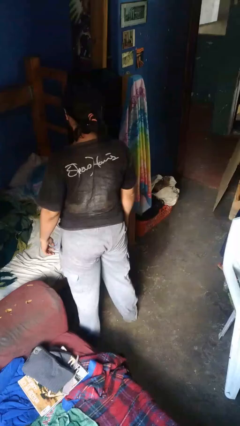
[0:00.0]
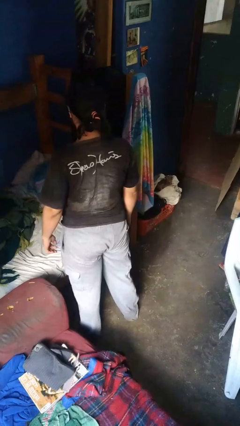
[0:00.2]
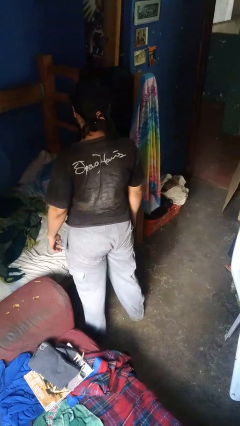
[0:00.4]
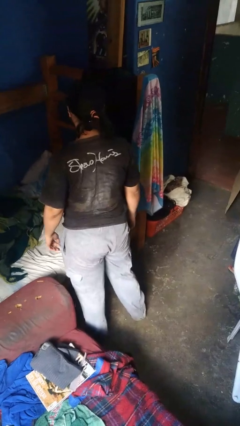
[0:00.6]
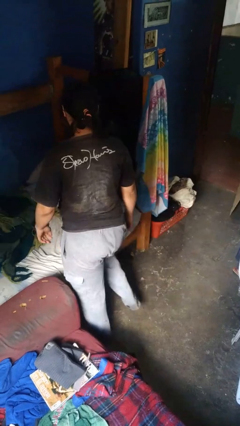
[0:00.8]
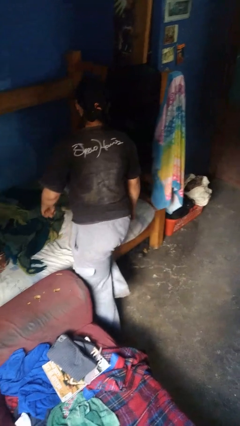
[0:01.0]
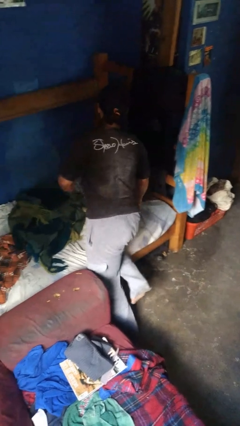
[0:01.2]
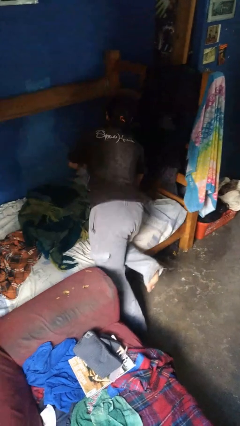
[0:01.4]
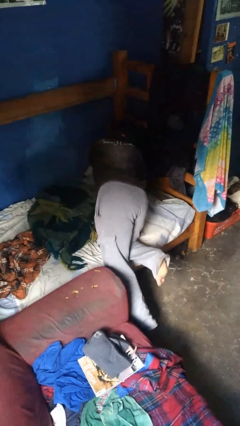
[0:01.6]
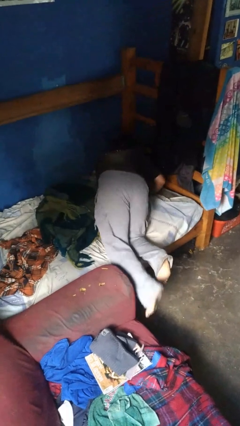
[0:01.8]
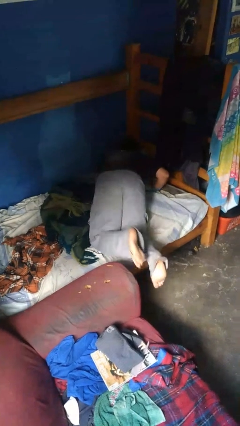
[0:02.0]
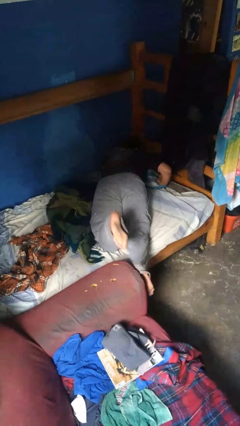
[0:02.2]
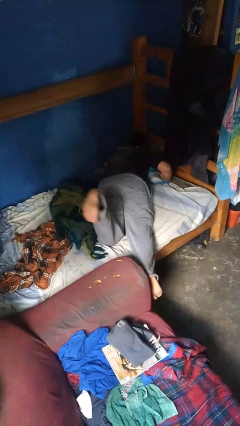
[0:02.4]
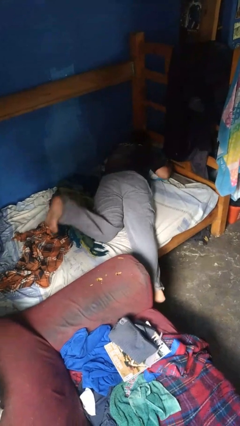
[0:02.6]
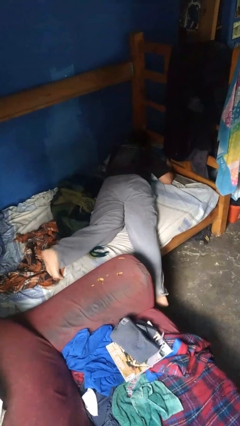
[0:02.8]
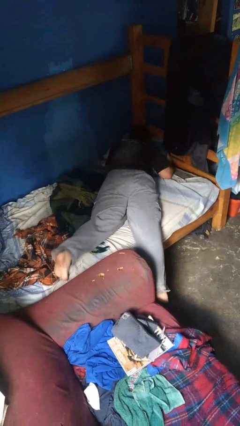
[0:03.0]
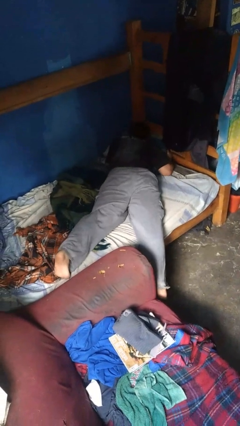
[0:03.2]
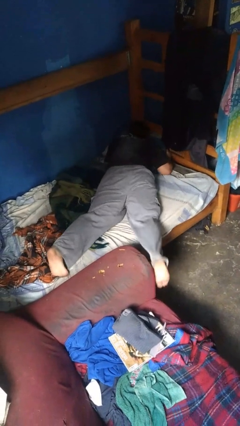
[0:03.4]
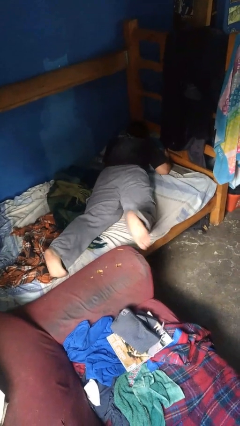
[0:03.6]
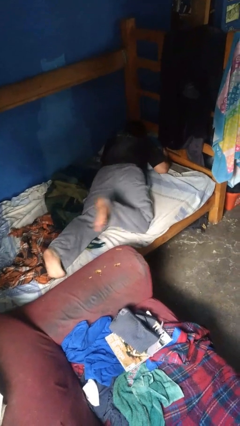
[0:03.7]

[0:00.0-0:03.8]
person lies down on bed

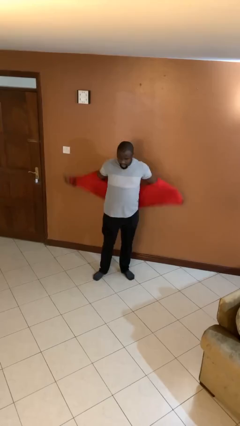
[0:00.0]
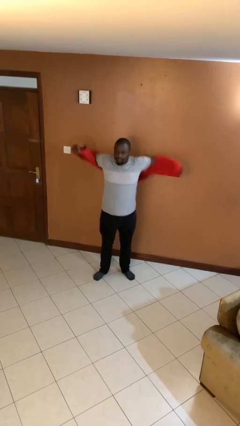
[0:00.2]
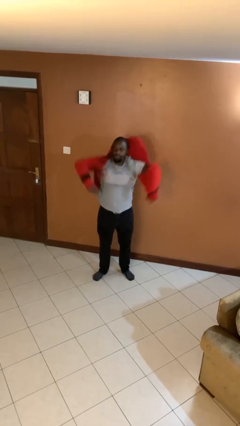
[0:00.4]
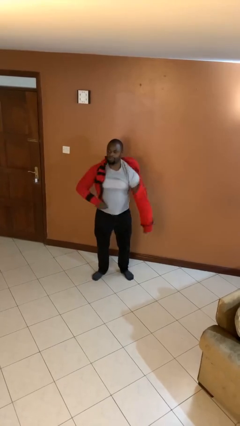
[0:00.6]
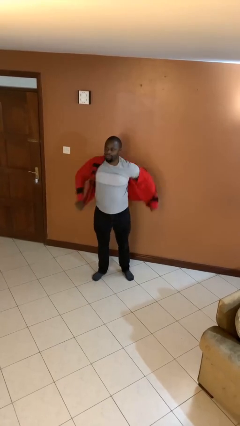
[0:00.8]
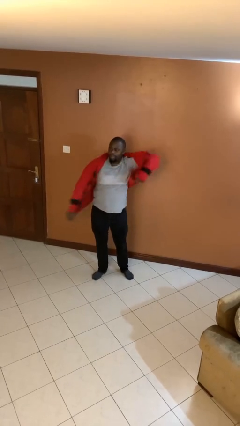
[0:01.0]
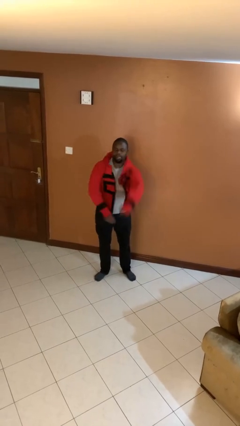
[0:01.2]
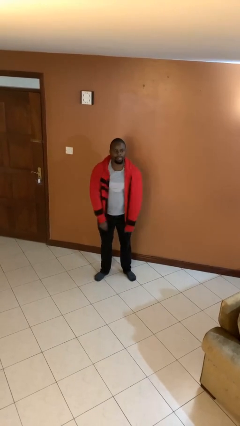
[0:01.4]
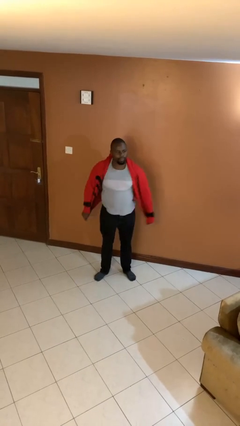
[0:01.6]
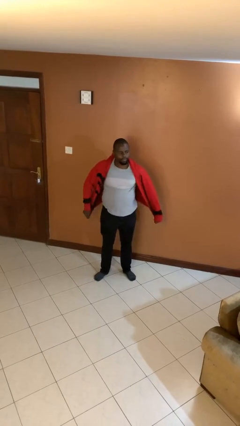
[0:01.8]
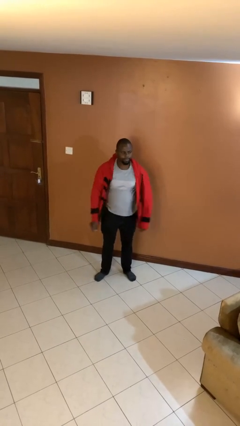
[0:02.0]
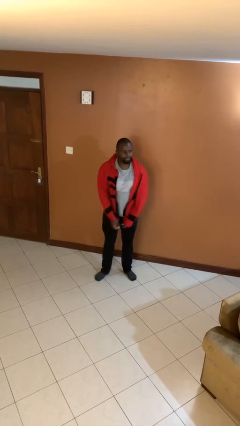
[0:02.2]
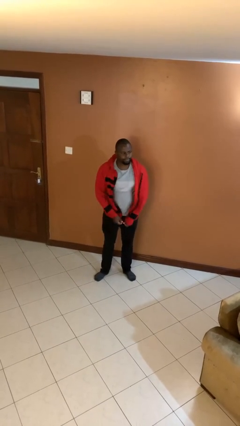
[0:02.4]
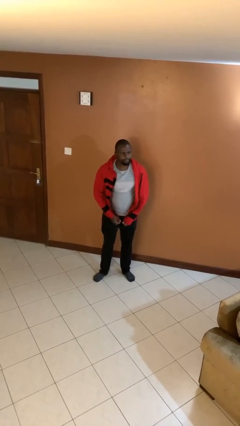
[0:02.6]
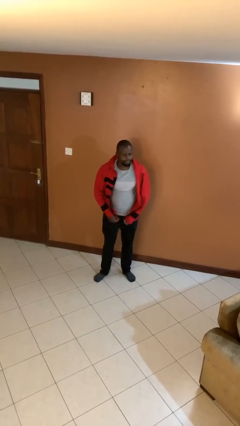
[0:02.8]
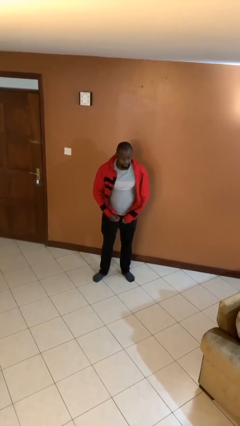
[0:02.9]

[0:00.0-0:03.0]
person puts on jacket

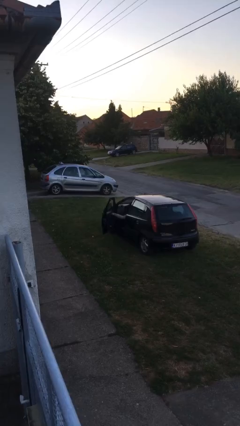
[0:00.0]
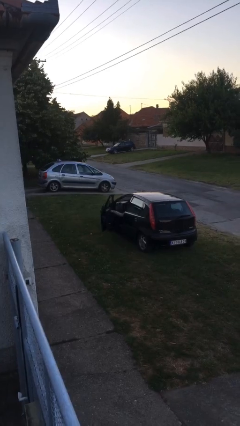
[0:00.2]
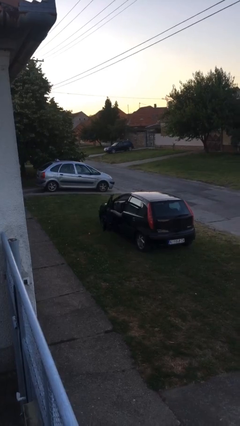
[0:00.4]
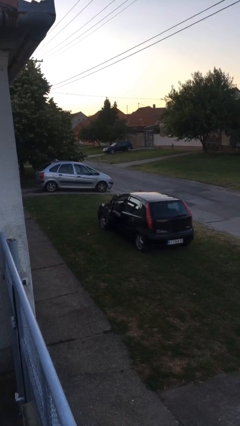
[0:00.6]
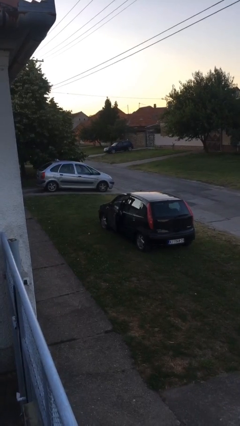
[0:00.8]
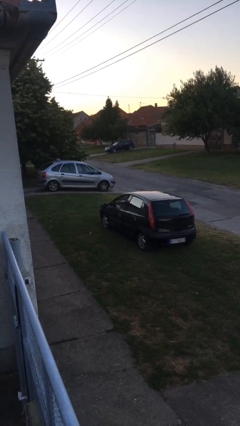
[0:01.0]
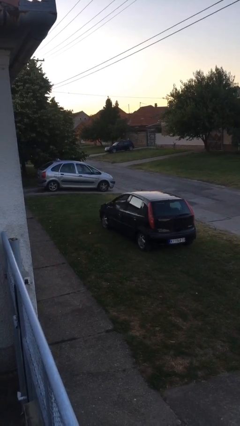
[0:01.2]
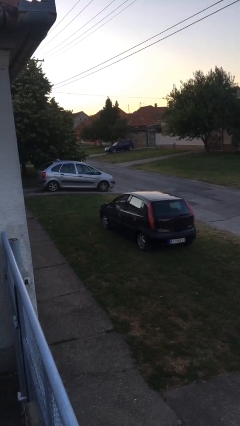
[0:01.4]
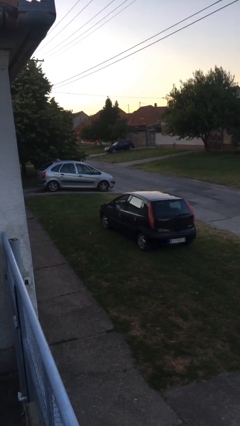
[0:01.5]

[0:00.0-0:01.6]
person closes car door

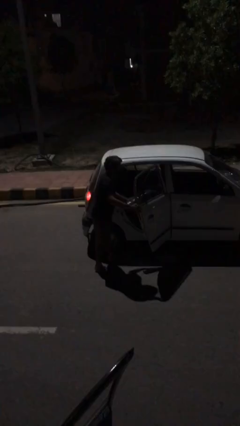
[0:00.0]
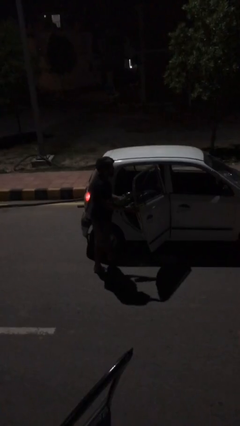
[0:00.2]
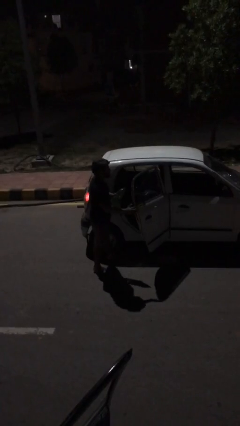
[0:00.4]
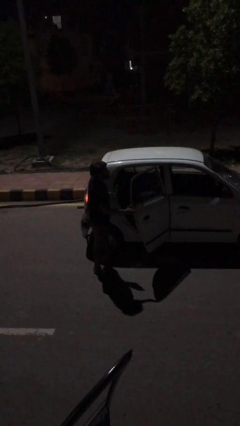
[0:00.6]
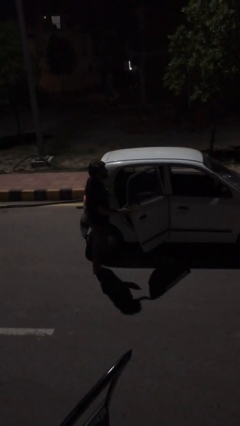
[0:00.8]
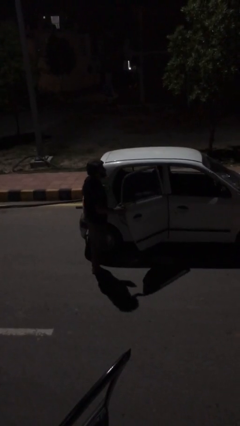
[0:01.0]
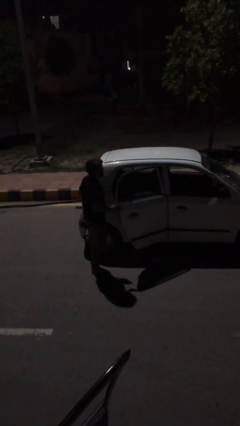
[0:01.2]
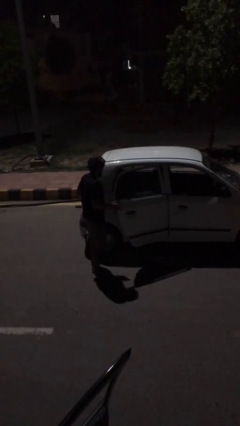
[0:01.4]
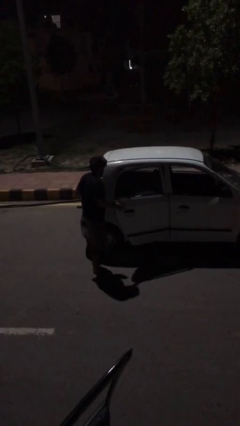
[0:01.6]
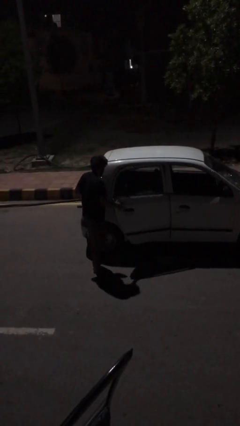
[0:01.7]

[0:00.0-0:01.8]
person unloads car

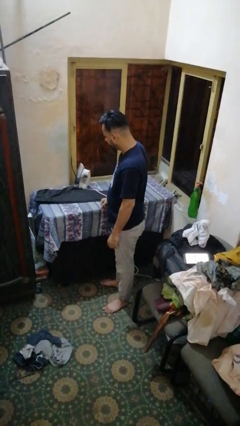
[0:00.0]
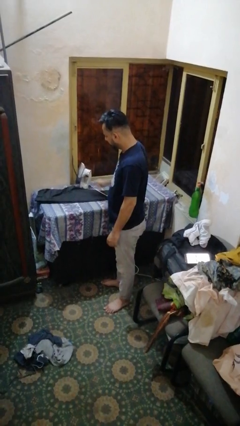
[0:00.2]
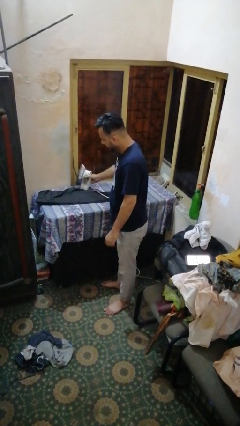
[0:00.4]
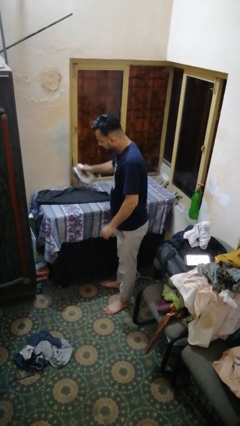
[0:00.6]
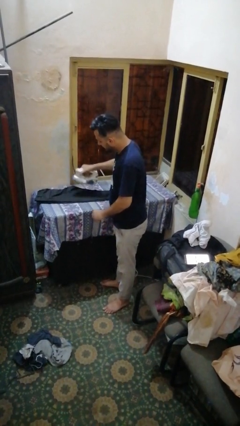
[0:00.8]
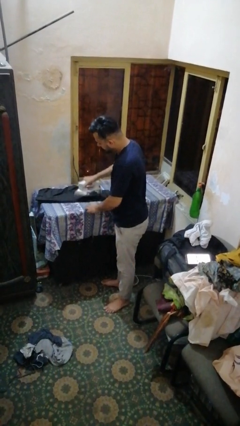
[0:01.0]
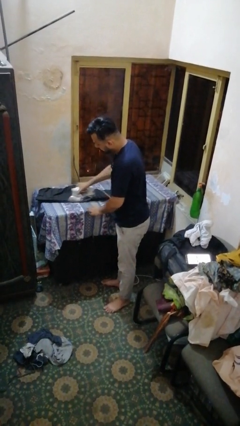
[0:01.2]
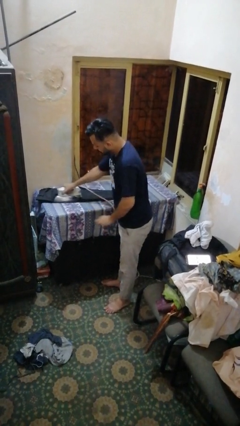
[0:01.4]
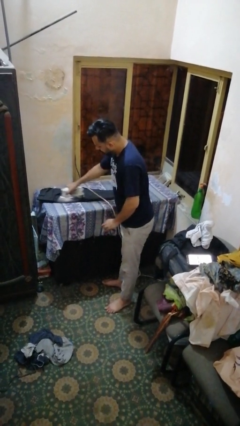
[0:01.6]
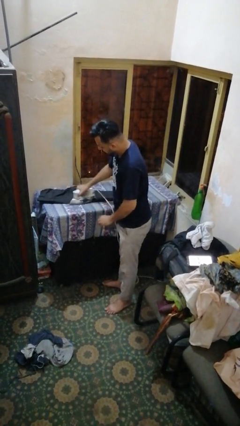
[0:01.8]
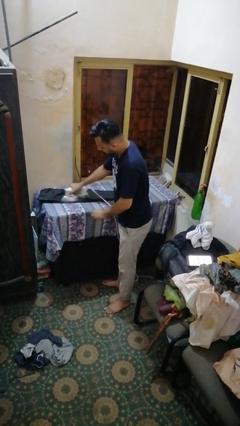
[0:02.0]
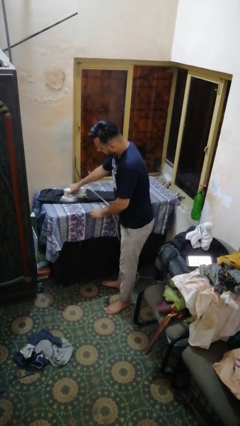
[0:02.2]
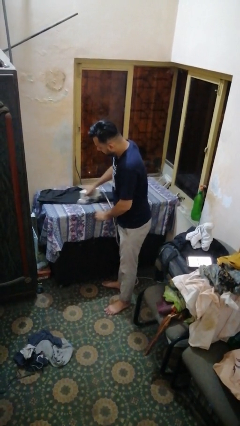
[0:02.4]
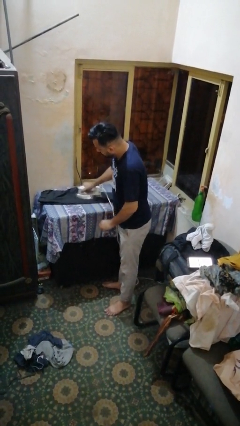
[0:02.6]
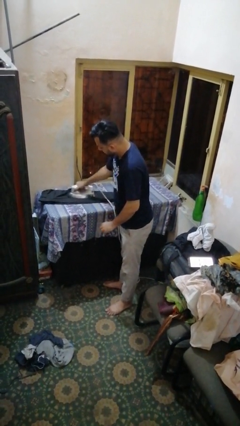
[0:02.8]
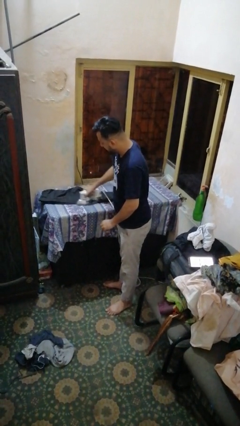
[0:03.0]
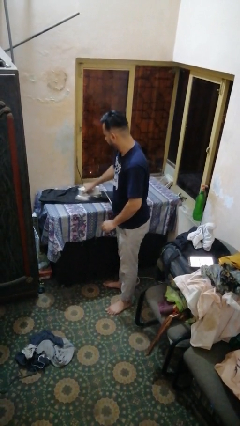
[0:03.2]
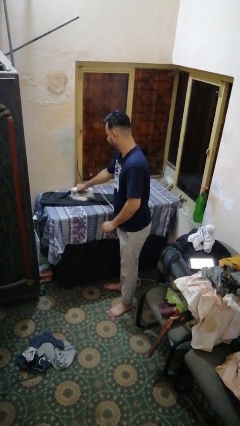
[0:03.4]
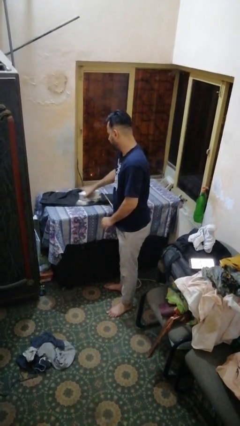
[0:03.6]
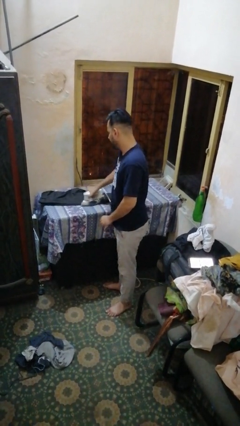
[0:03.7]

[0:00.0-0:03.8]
person irons clothes

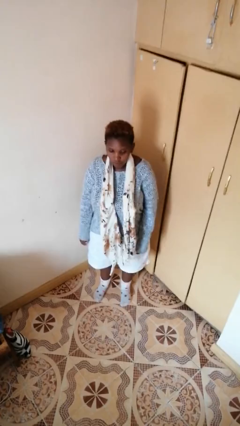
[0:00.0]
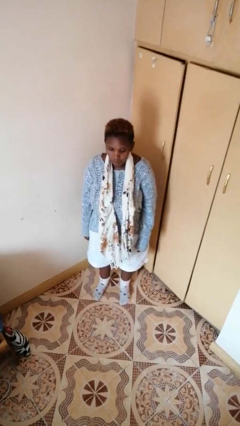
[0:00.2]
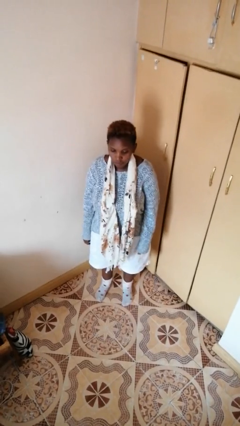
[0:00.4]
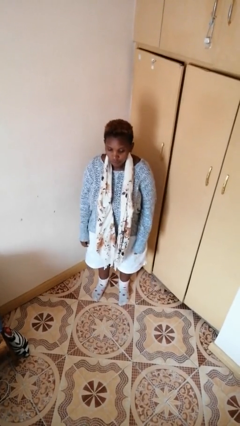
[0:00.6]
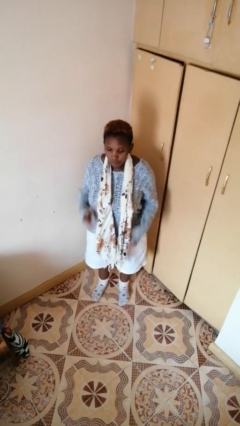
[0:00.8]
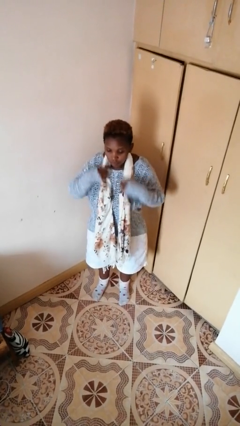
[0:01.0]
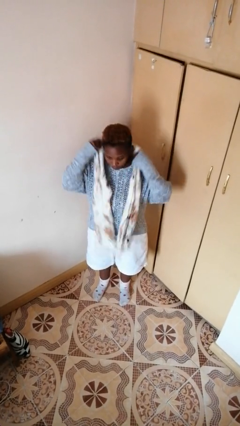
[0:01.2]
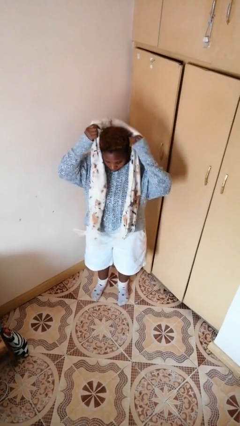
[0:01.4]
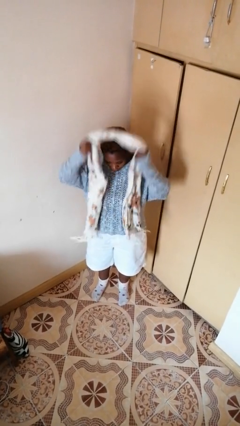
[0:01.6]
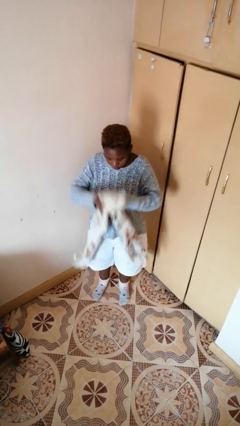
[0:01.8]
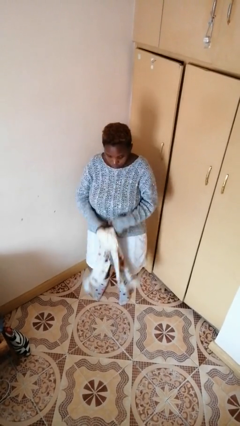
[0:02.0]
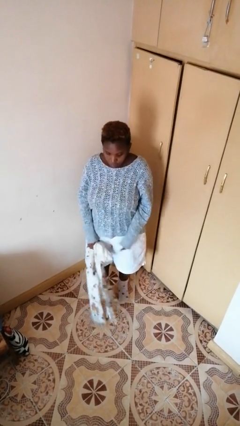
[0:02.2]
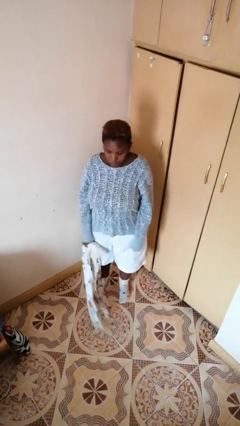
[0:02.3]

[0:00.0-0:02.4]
person takes off scarf

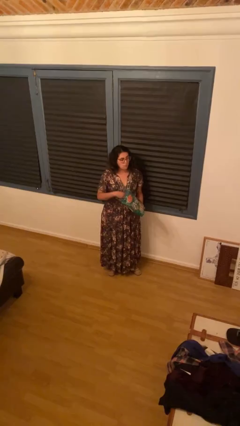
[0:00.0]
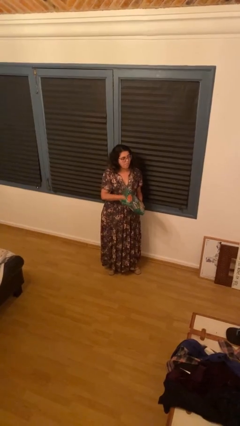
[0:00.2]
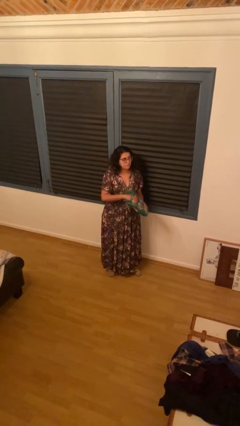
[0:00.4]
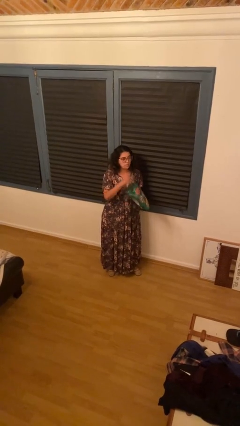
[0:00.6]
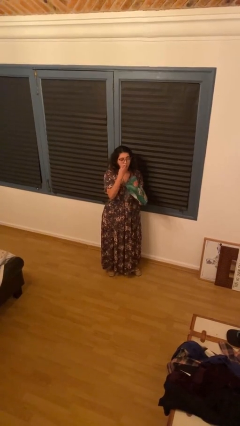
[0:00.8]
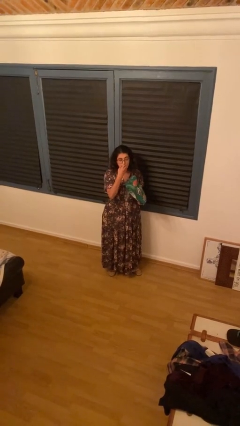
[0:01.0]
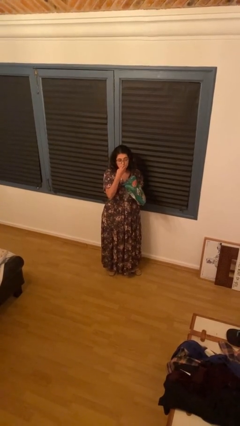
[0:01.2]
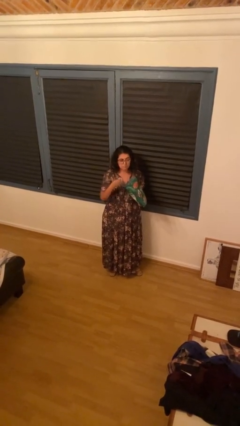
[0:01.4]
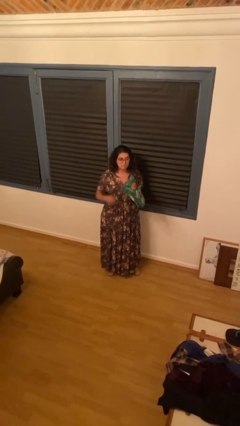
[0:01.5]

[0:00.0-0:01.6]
person eats snack from bag
